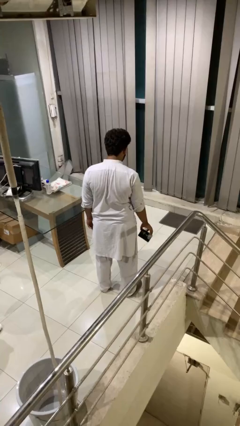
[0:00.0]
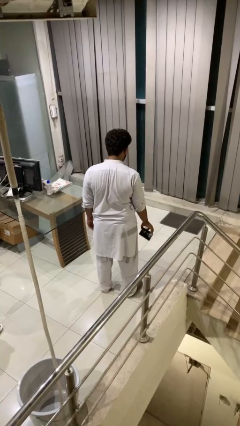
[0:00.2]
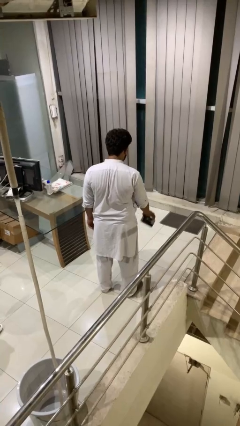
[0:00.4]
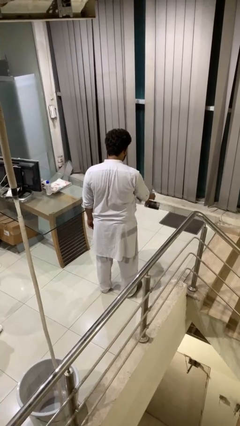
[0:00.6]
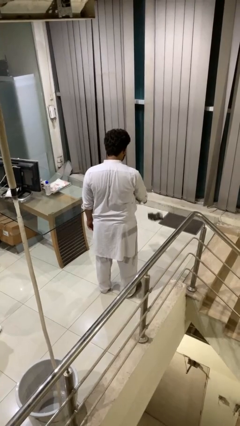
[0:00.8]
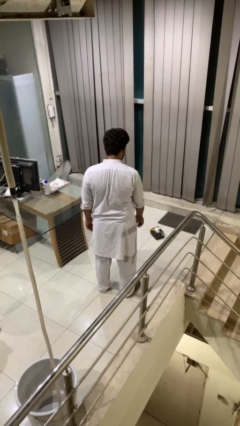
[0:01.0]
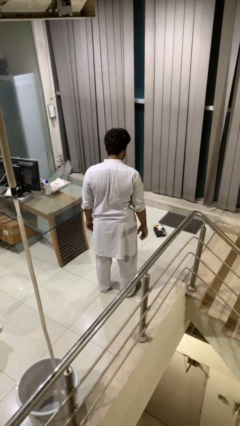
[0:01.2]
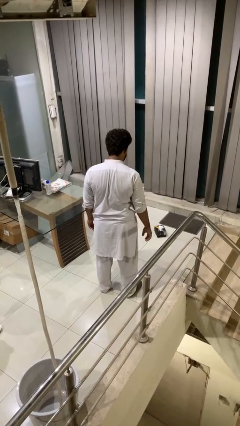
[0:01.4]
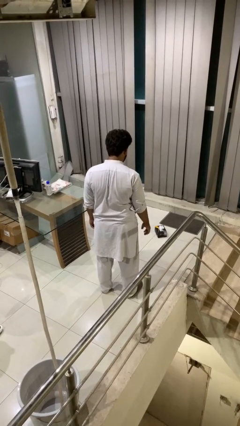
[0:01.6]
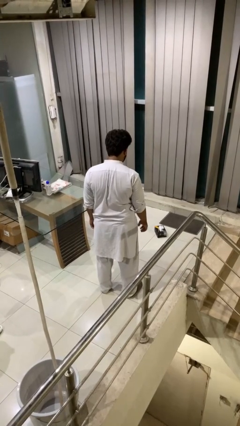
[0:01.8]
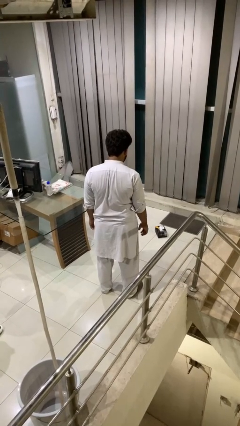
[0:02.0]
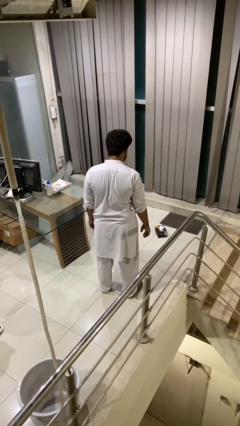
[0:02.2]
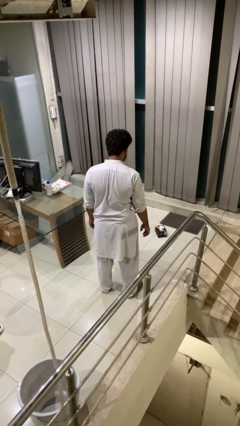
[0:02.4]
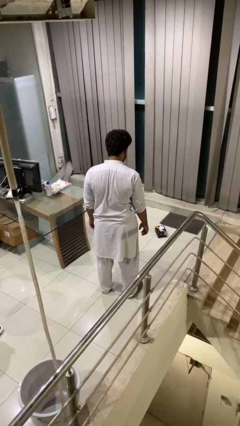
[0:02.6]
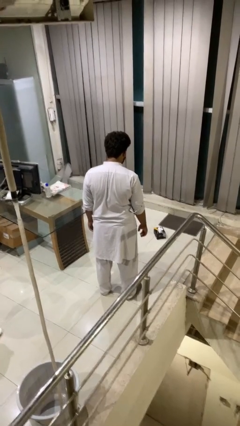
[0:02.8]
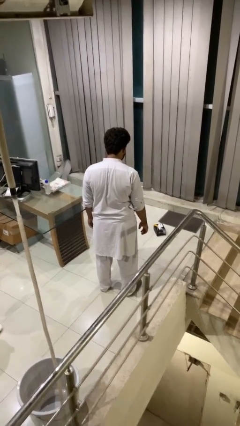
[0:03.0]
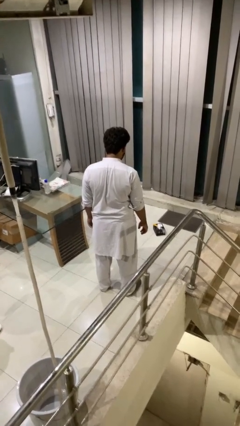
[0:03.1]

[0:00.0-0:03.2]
person throws object to ground

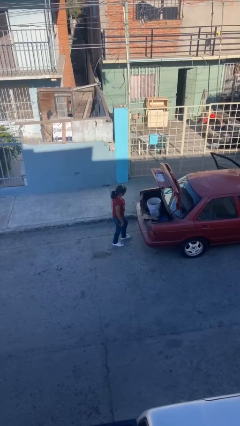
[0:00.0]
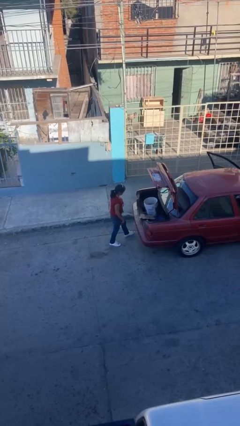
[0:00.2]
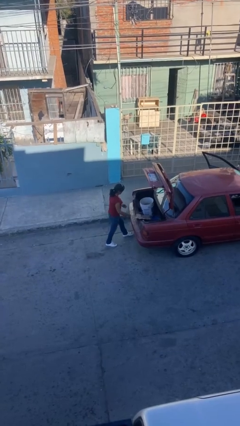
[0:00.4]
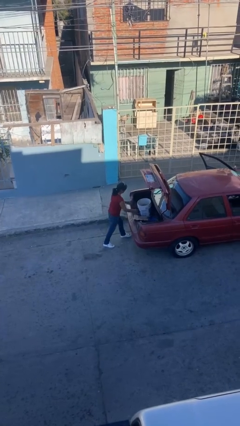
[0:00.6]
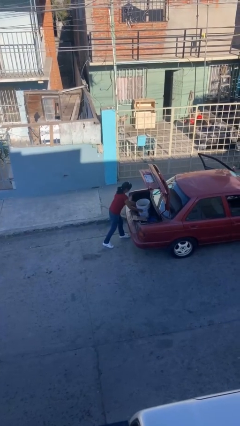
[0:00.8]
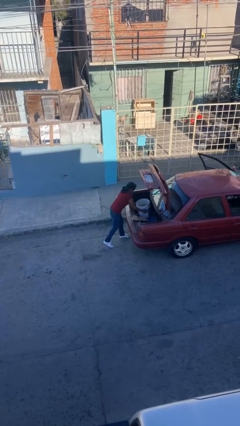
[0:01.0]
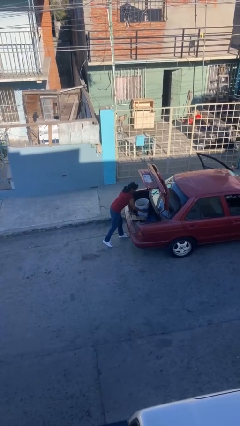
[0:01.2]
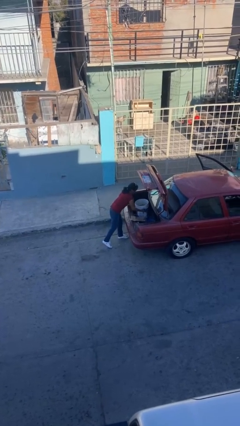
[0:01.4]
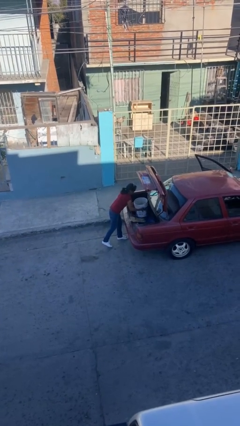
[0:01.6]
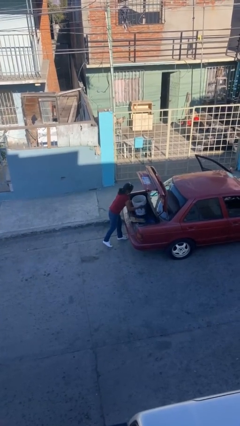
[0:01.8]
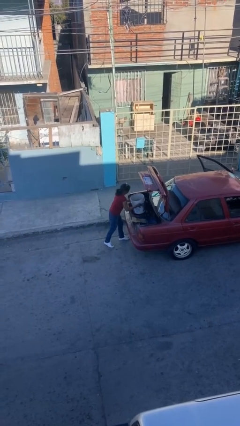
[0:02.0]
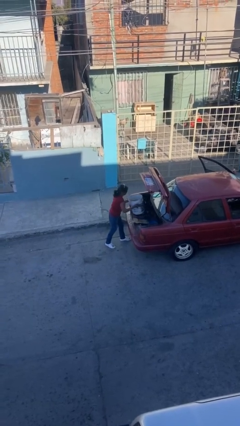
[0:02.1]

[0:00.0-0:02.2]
person unloads car

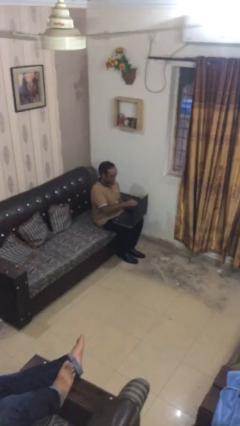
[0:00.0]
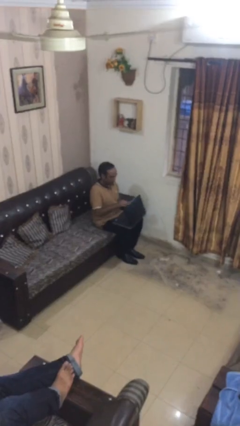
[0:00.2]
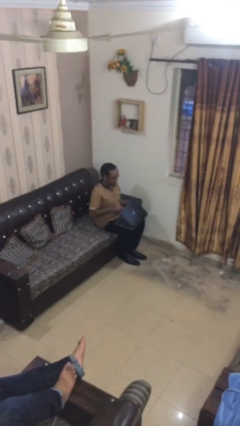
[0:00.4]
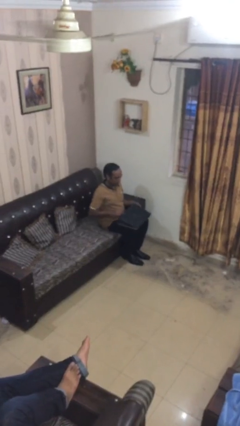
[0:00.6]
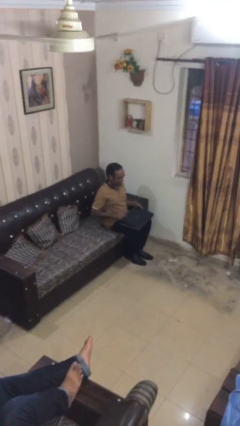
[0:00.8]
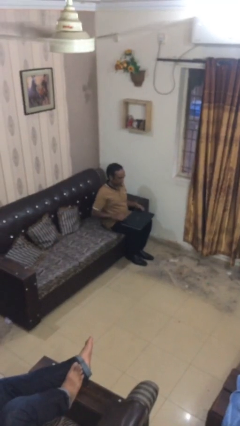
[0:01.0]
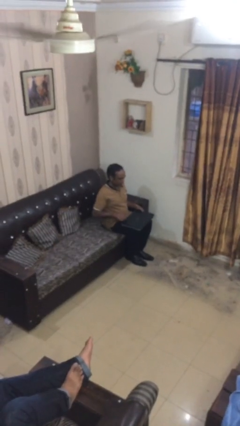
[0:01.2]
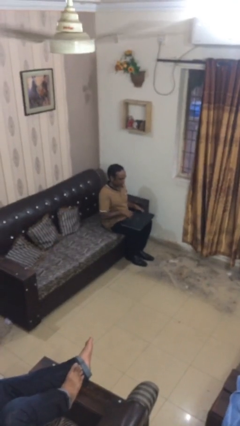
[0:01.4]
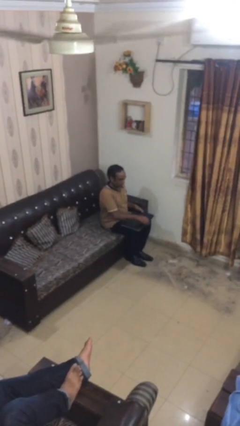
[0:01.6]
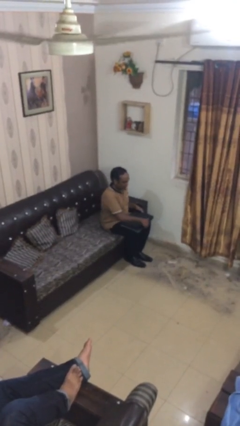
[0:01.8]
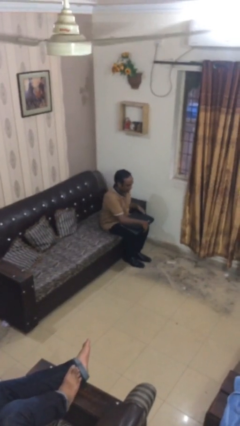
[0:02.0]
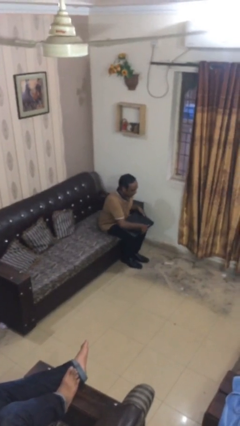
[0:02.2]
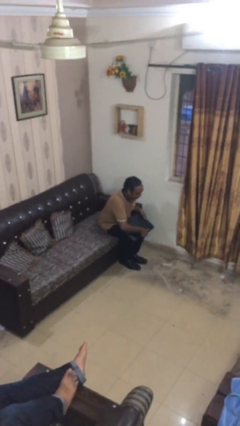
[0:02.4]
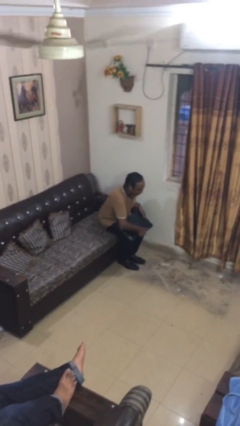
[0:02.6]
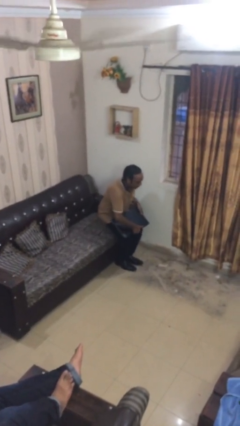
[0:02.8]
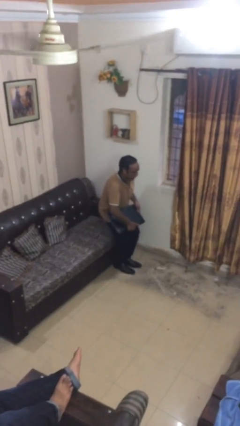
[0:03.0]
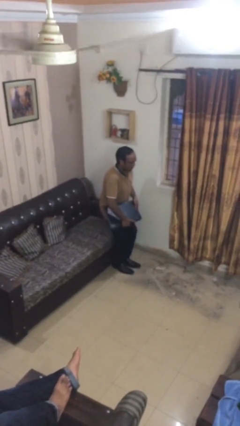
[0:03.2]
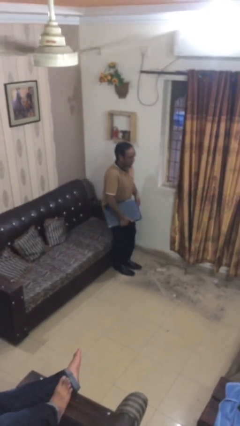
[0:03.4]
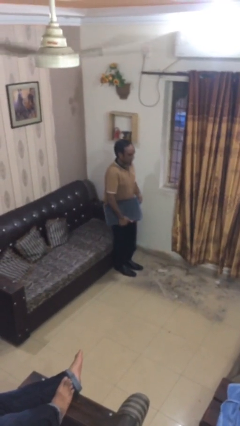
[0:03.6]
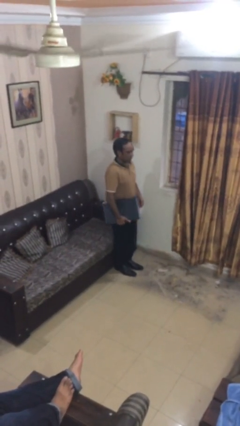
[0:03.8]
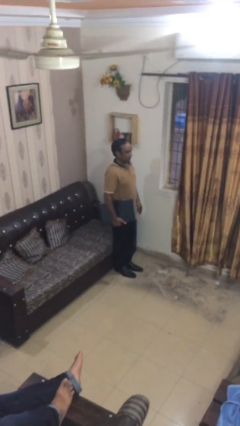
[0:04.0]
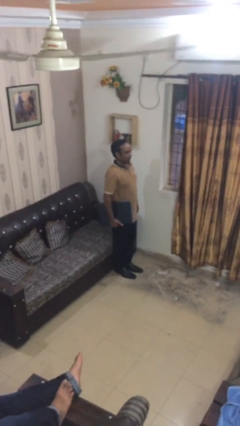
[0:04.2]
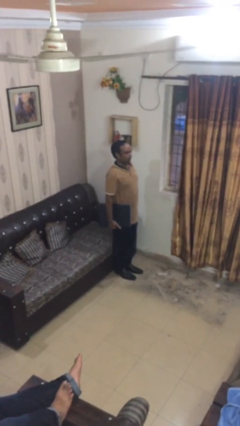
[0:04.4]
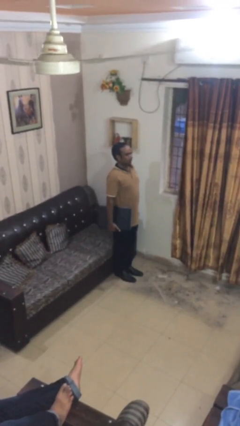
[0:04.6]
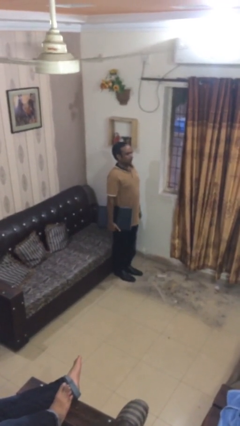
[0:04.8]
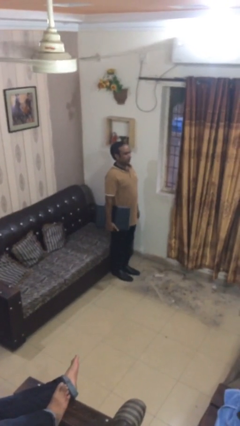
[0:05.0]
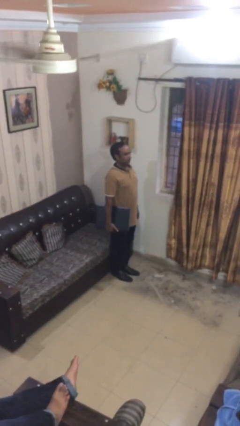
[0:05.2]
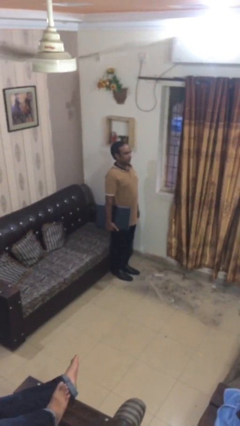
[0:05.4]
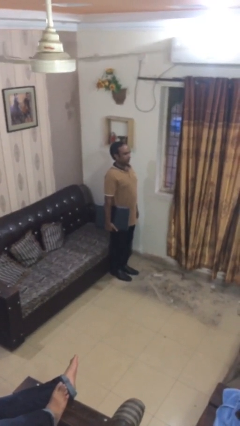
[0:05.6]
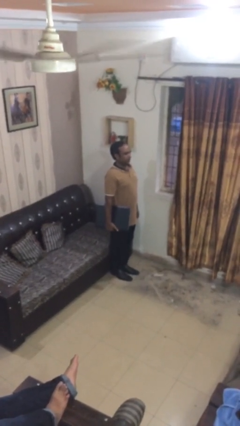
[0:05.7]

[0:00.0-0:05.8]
person stands up

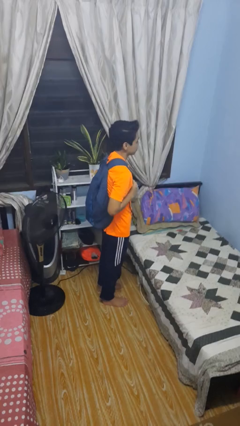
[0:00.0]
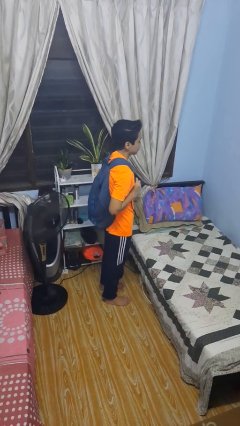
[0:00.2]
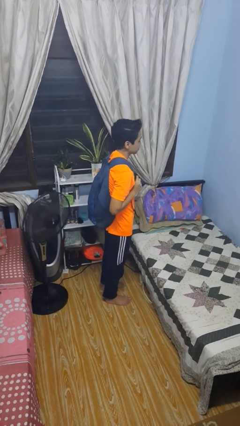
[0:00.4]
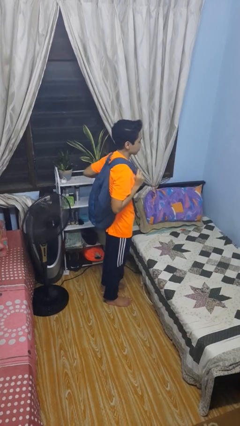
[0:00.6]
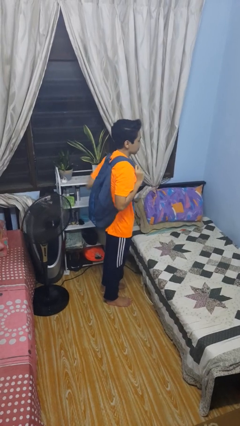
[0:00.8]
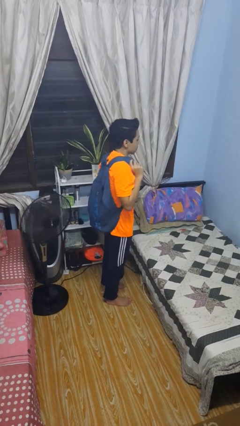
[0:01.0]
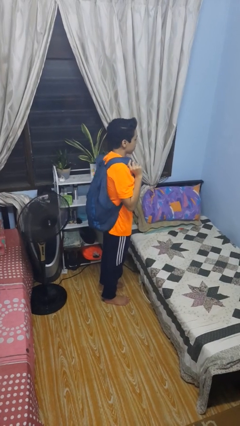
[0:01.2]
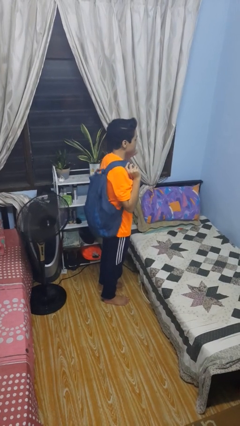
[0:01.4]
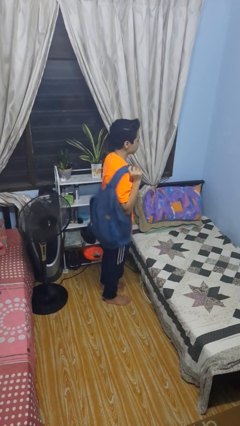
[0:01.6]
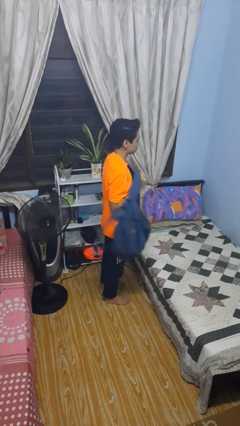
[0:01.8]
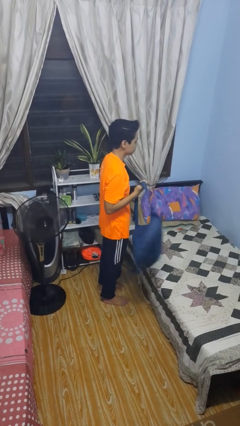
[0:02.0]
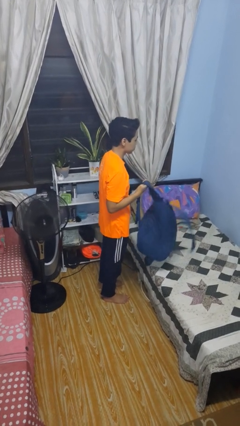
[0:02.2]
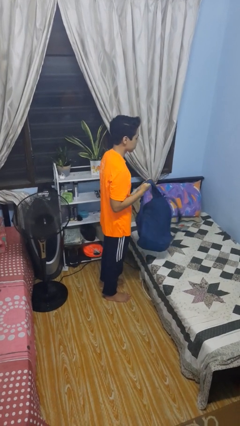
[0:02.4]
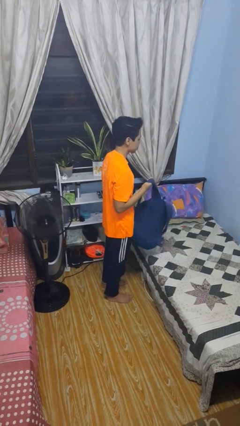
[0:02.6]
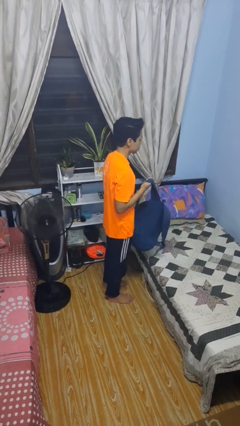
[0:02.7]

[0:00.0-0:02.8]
person takes off backpack

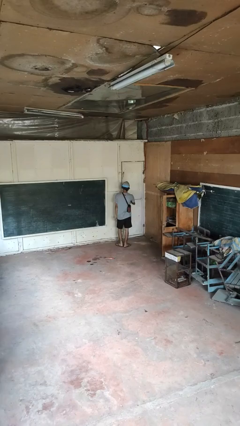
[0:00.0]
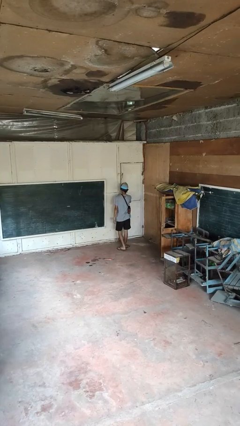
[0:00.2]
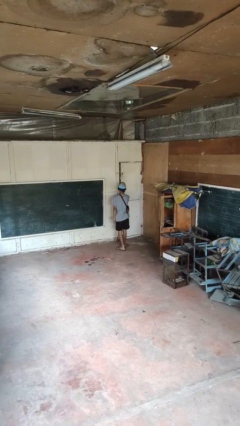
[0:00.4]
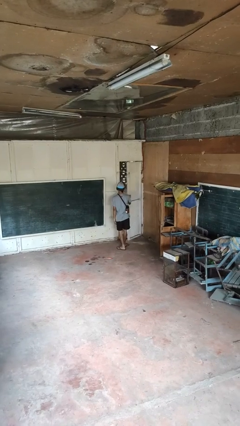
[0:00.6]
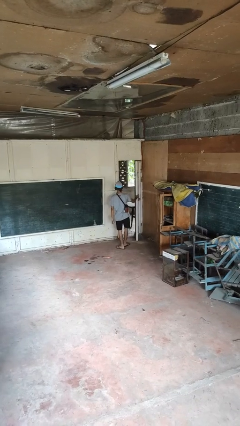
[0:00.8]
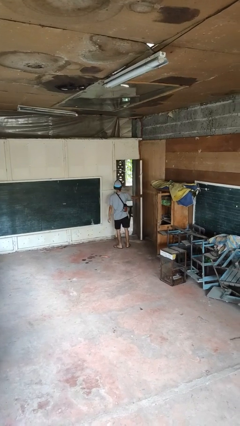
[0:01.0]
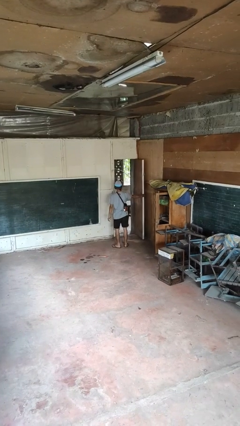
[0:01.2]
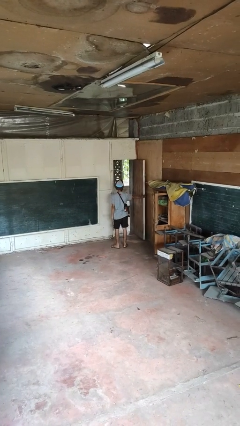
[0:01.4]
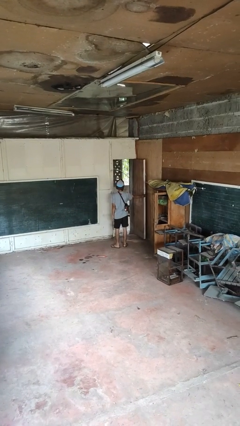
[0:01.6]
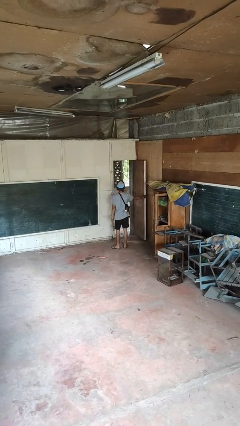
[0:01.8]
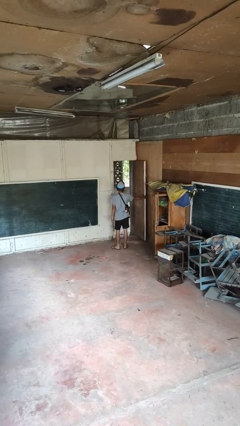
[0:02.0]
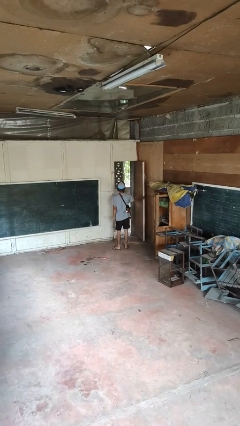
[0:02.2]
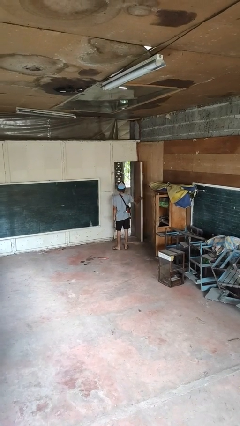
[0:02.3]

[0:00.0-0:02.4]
person opens facility door

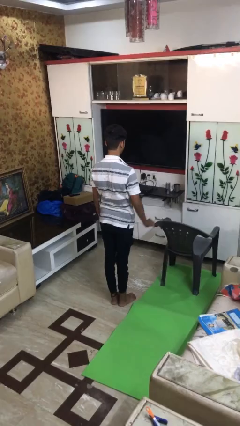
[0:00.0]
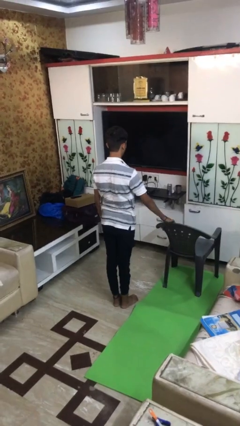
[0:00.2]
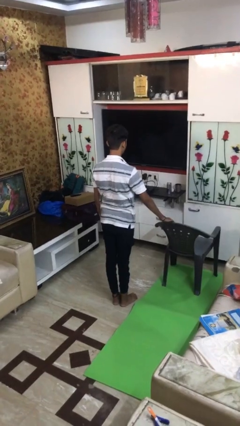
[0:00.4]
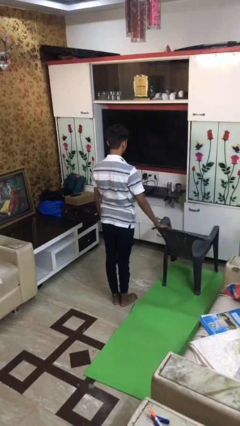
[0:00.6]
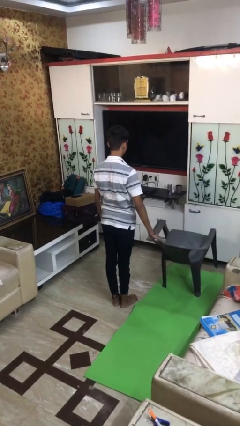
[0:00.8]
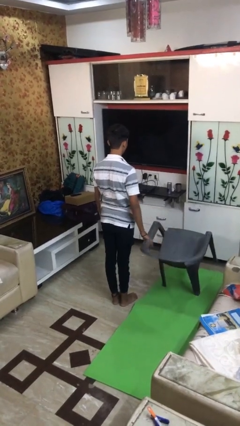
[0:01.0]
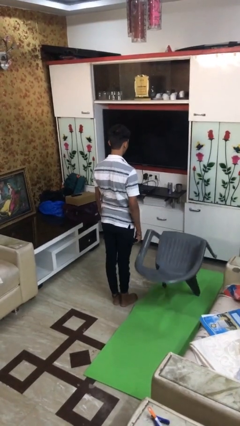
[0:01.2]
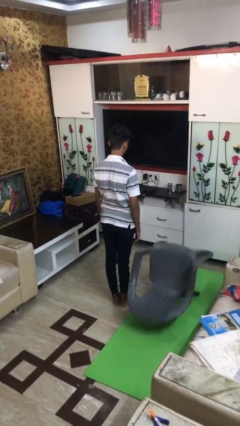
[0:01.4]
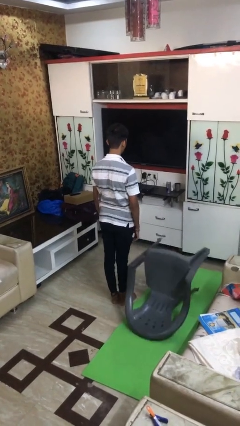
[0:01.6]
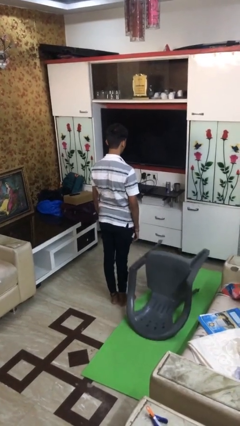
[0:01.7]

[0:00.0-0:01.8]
person knocks over furniture
